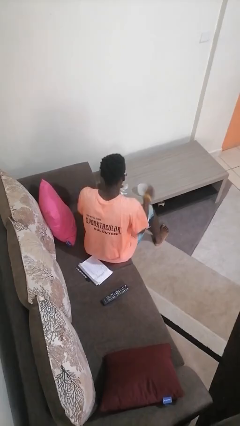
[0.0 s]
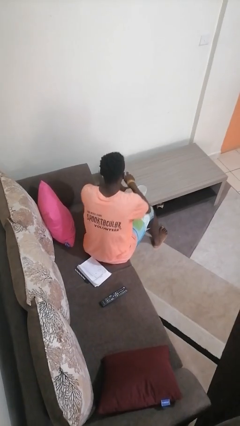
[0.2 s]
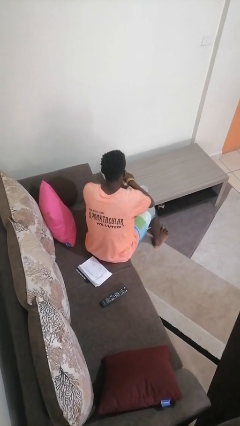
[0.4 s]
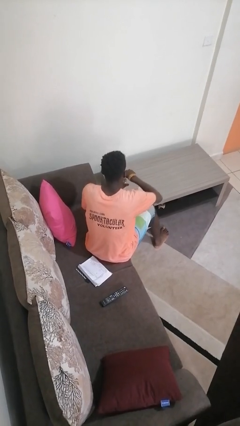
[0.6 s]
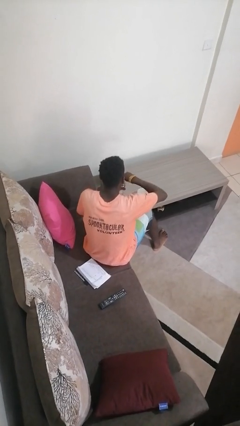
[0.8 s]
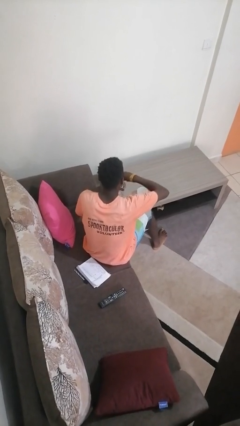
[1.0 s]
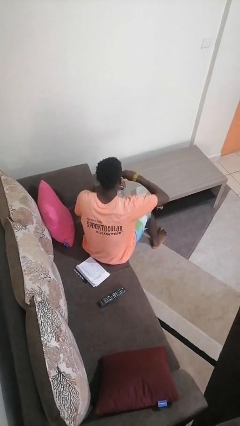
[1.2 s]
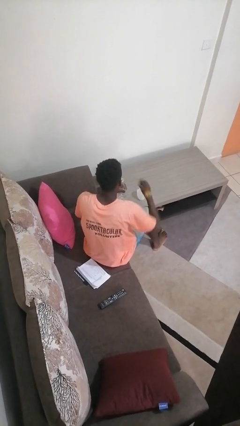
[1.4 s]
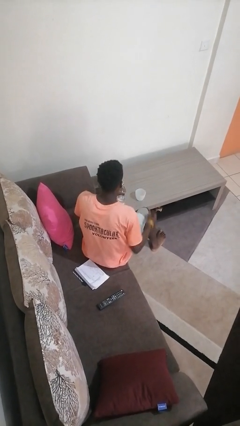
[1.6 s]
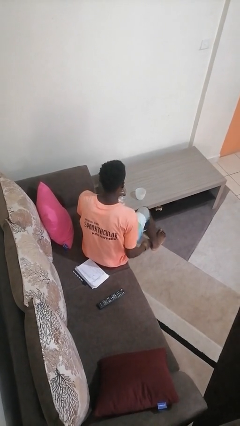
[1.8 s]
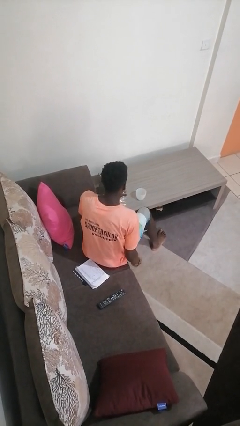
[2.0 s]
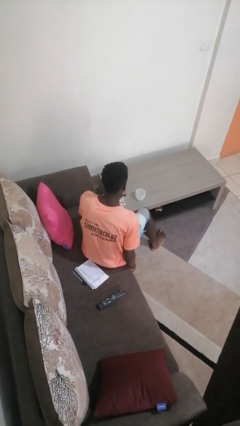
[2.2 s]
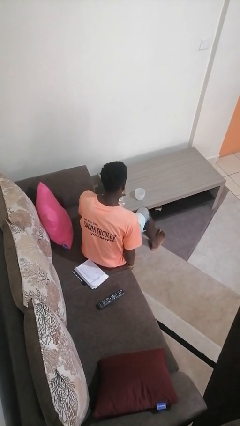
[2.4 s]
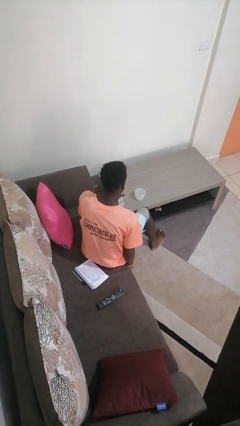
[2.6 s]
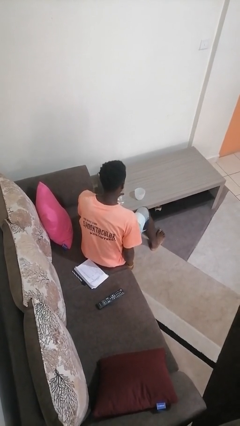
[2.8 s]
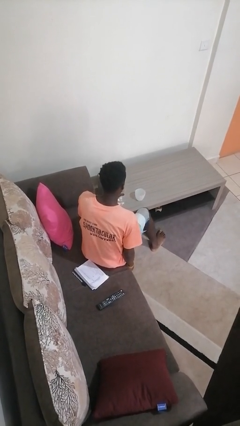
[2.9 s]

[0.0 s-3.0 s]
person unscrews lid from bottle

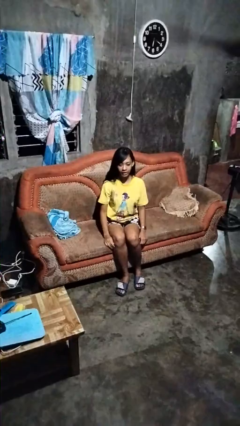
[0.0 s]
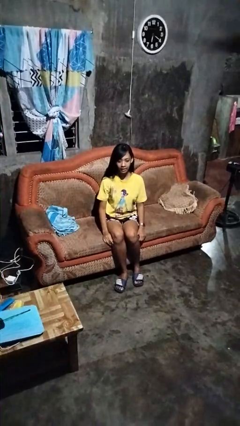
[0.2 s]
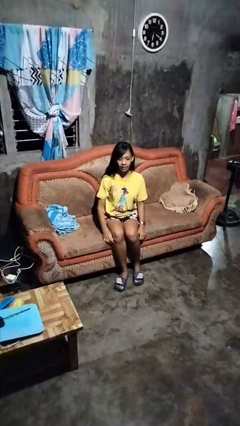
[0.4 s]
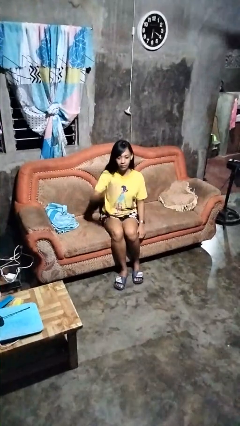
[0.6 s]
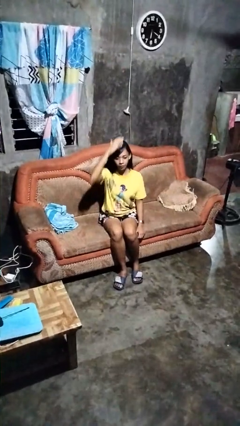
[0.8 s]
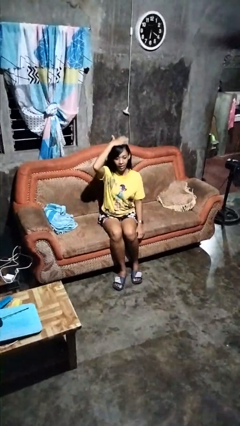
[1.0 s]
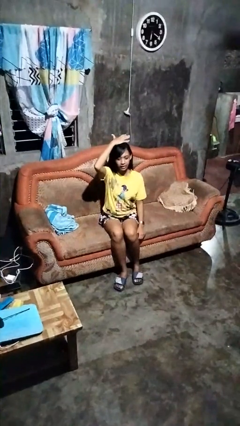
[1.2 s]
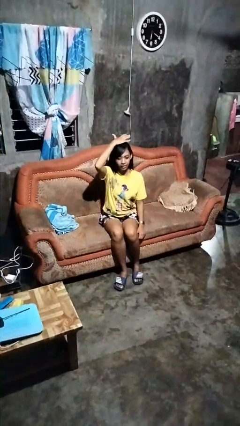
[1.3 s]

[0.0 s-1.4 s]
person pats head

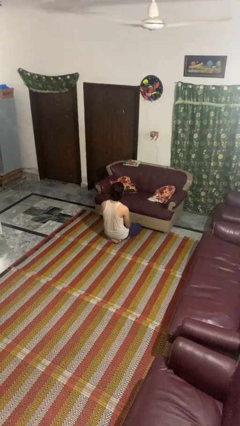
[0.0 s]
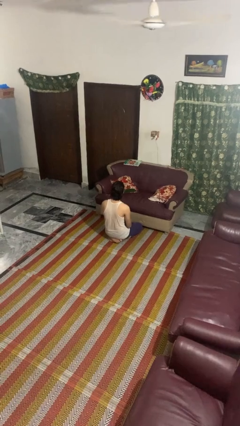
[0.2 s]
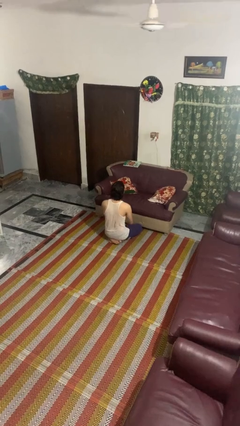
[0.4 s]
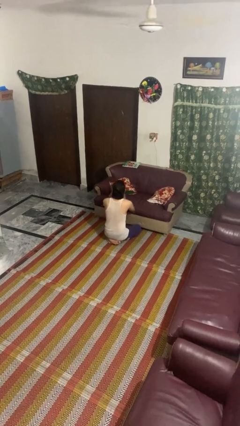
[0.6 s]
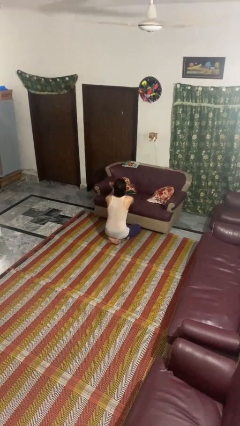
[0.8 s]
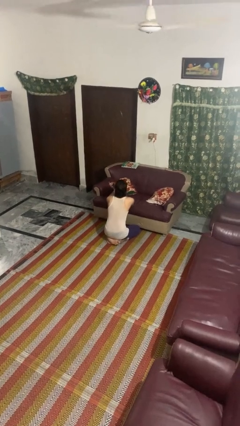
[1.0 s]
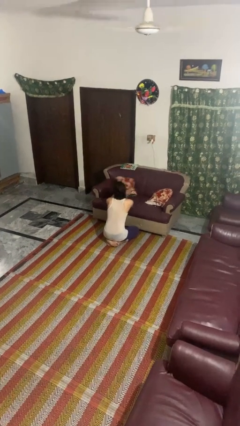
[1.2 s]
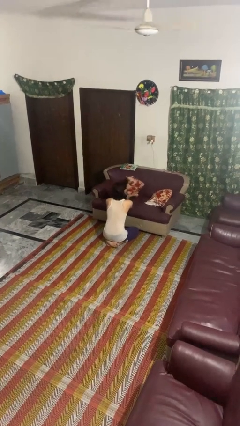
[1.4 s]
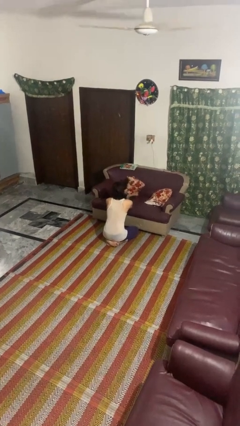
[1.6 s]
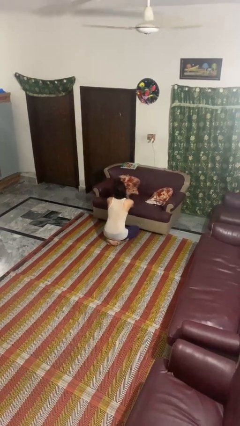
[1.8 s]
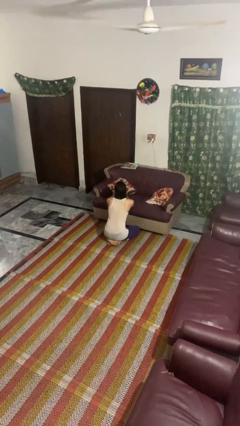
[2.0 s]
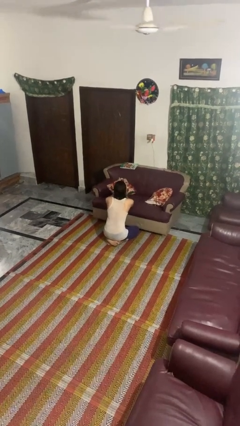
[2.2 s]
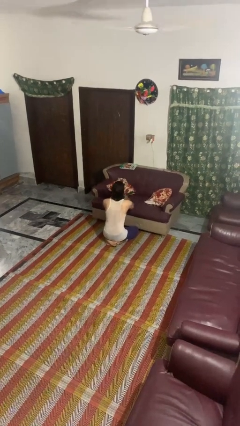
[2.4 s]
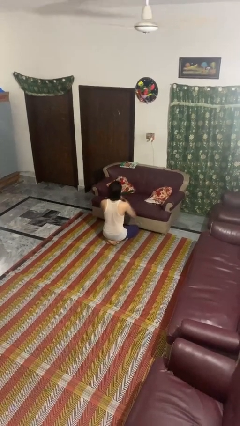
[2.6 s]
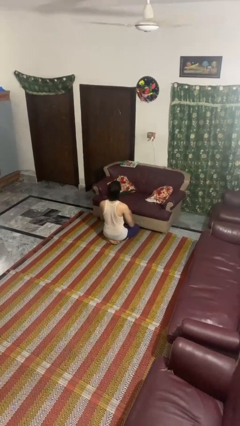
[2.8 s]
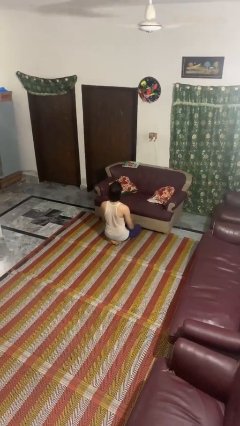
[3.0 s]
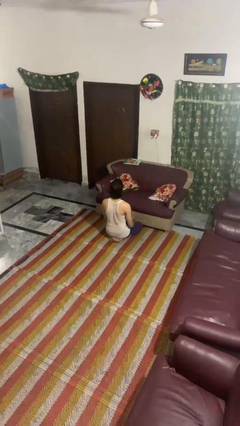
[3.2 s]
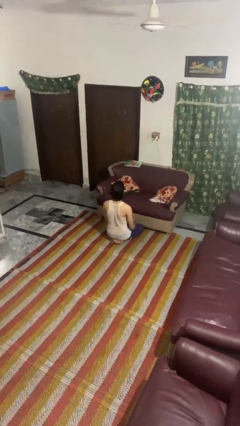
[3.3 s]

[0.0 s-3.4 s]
person searches in couch

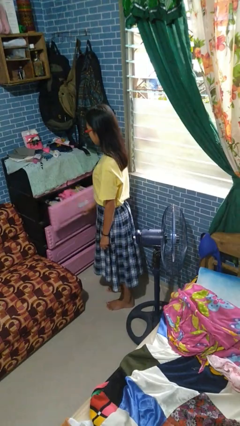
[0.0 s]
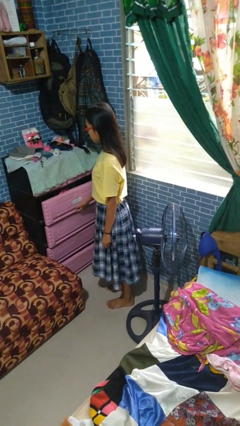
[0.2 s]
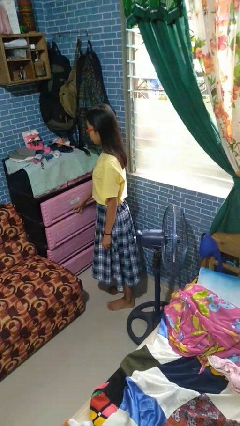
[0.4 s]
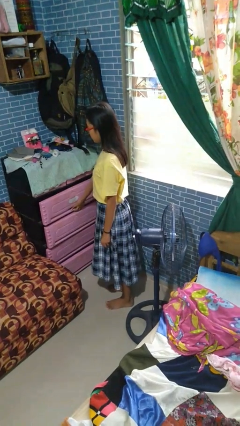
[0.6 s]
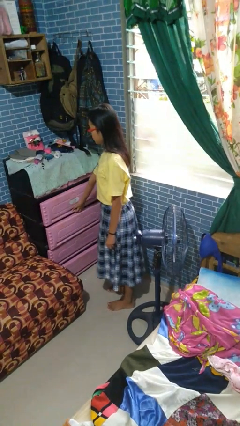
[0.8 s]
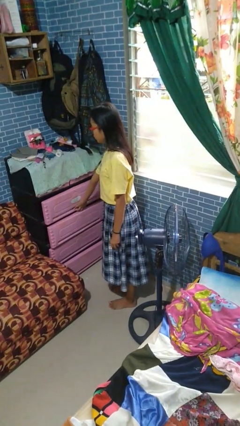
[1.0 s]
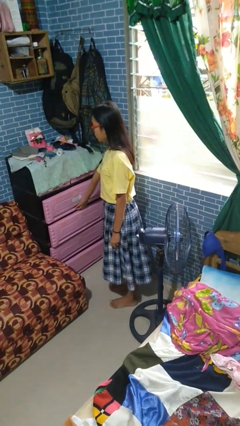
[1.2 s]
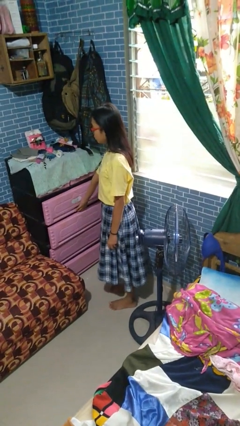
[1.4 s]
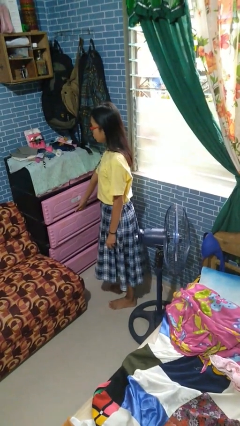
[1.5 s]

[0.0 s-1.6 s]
person closes dresser drawer

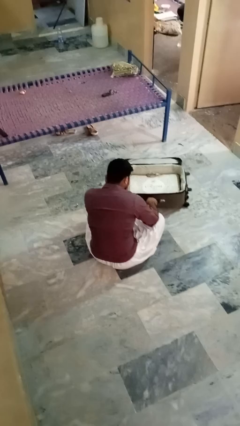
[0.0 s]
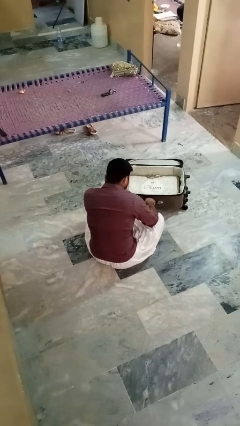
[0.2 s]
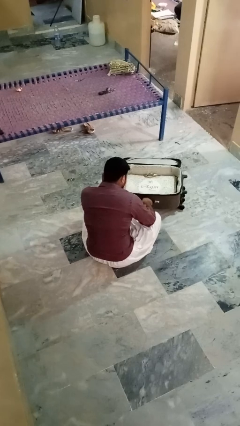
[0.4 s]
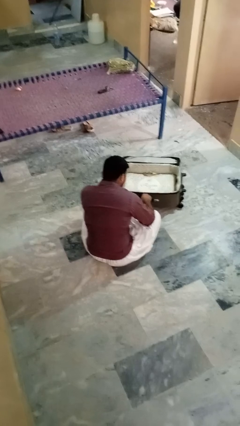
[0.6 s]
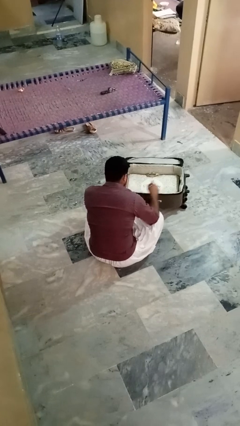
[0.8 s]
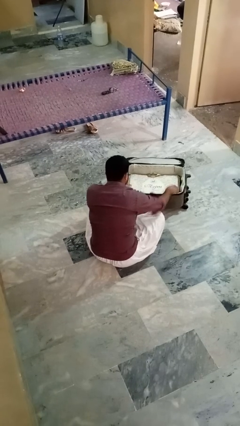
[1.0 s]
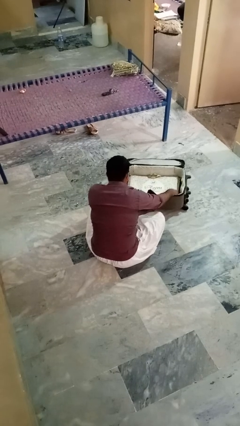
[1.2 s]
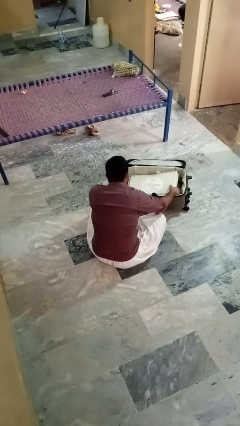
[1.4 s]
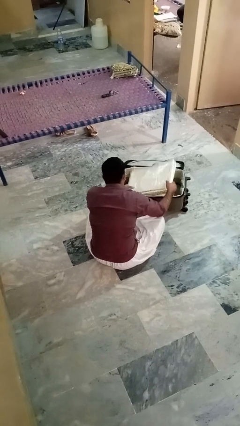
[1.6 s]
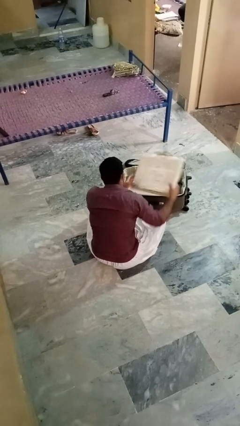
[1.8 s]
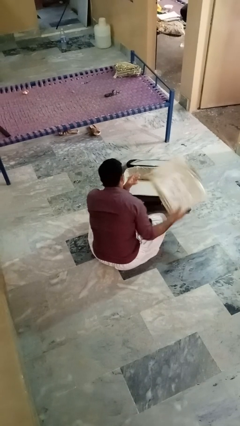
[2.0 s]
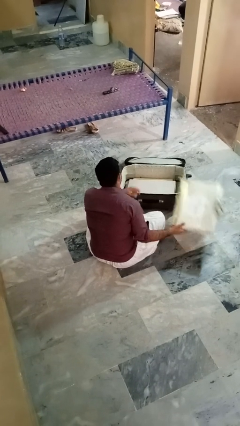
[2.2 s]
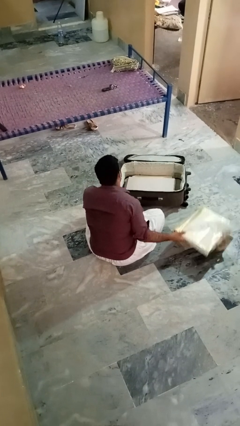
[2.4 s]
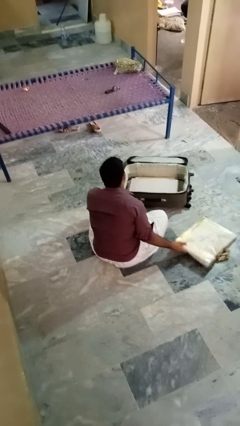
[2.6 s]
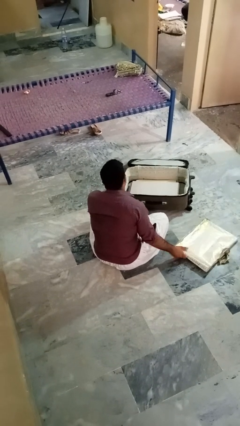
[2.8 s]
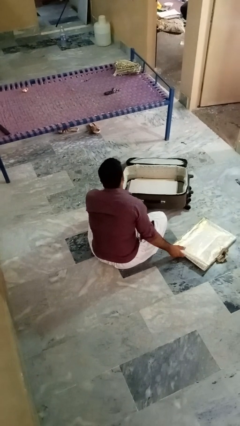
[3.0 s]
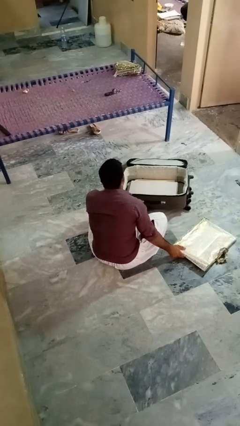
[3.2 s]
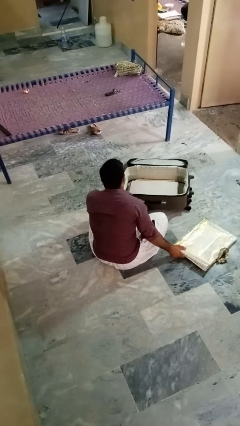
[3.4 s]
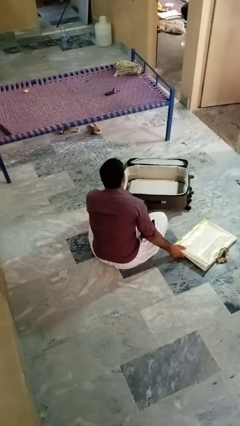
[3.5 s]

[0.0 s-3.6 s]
person takes object from bag

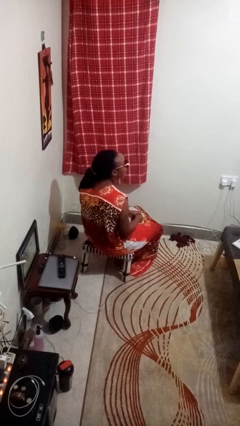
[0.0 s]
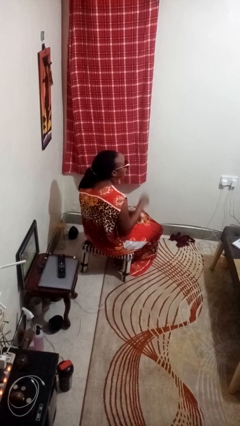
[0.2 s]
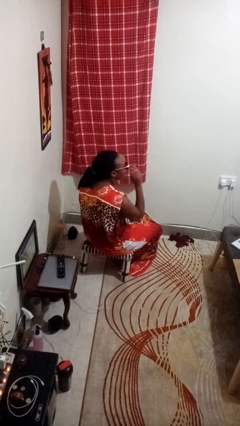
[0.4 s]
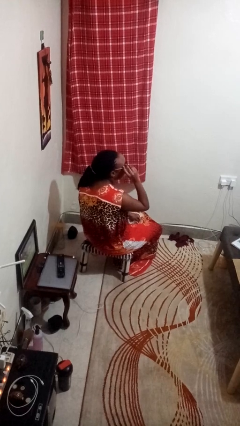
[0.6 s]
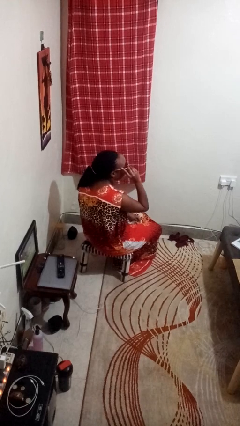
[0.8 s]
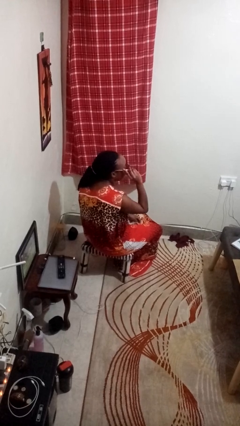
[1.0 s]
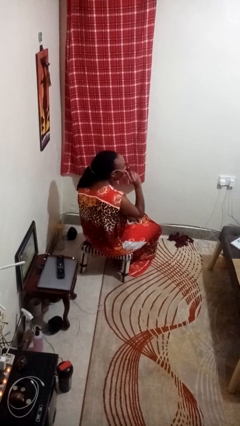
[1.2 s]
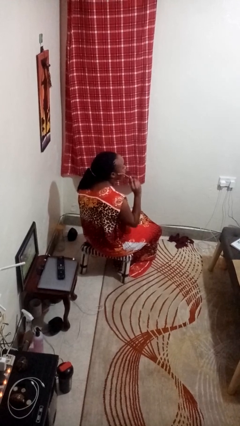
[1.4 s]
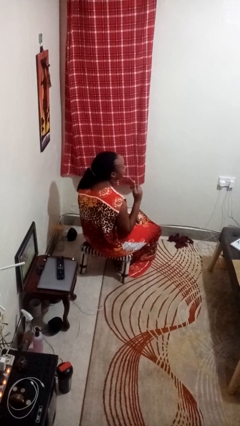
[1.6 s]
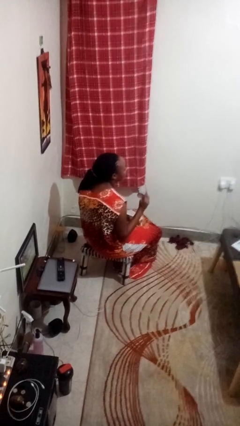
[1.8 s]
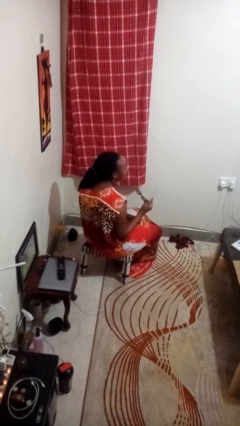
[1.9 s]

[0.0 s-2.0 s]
person takes off sunglasses

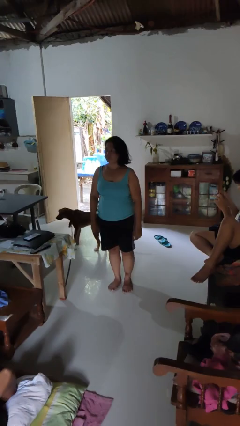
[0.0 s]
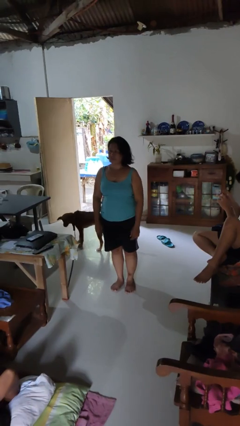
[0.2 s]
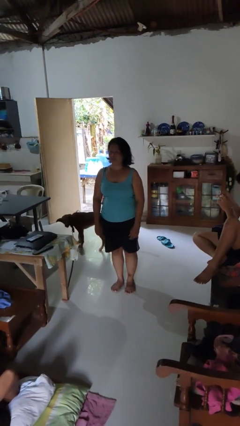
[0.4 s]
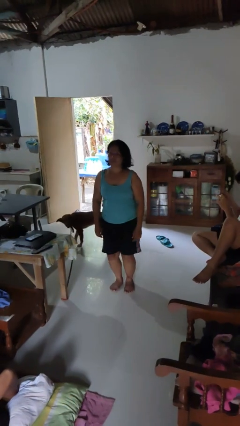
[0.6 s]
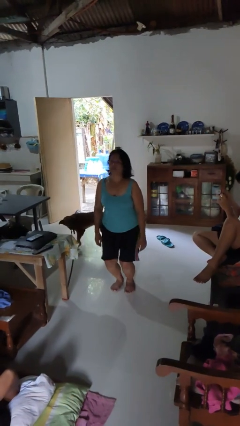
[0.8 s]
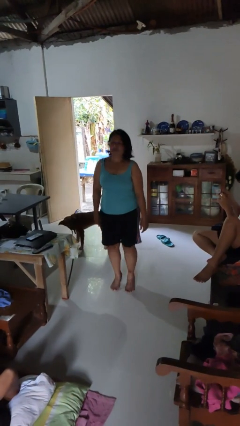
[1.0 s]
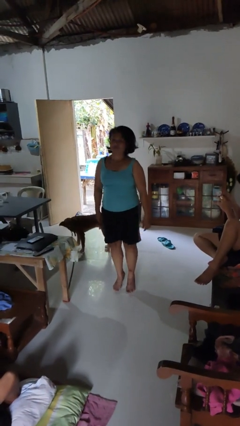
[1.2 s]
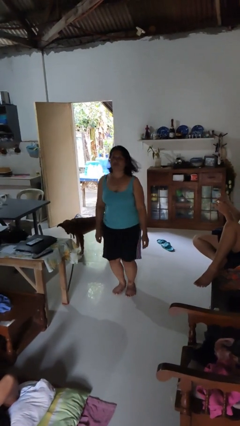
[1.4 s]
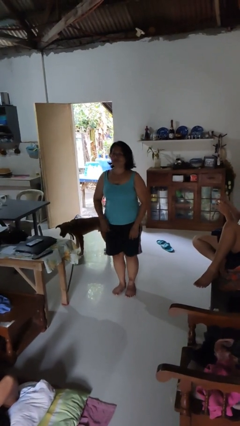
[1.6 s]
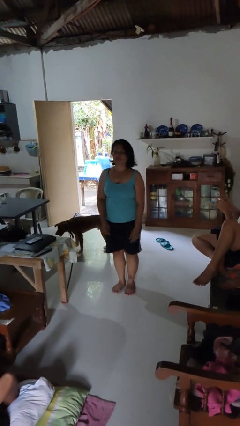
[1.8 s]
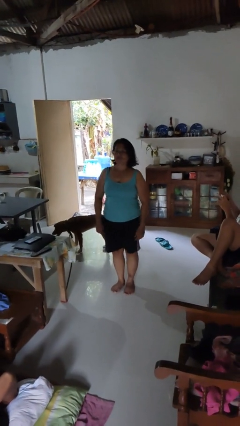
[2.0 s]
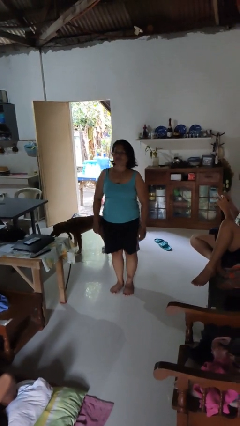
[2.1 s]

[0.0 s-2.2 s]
person jumps
